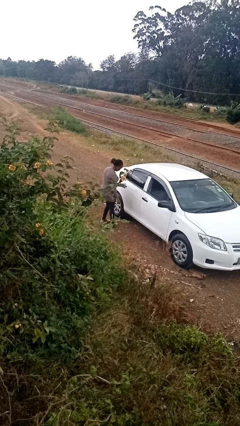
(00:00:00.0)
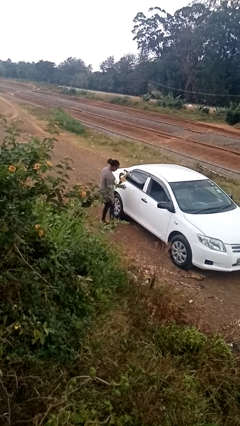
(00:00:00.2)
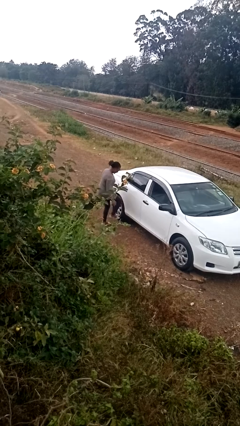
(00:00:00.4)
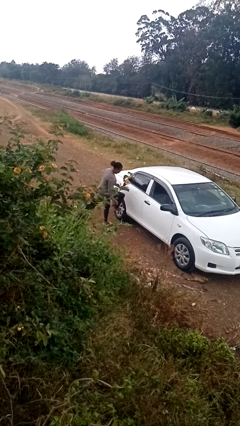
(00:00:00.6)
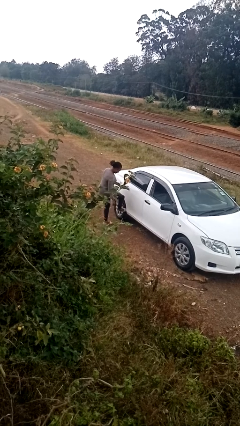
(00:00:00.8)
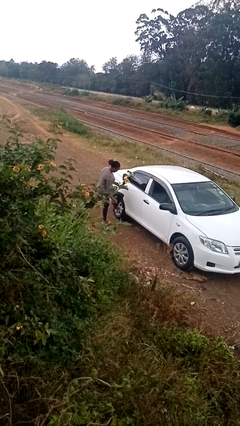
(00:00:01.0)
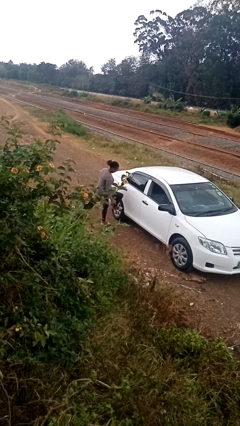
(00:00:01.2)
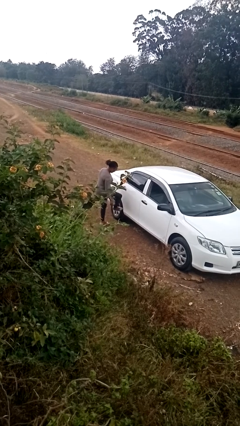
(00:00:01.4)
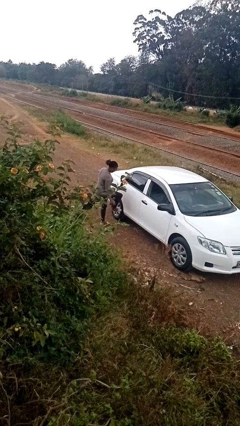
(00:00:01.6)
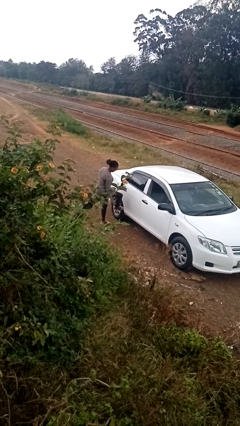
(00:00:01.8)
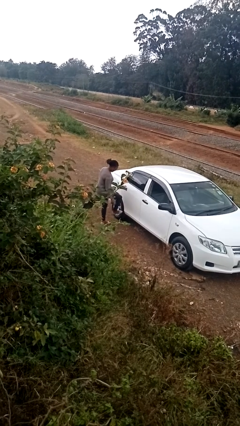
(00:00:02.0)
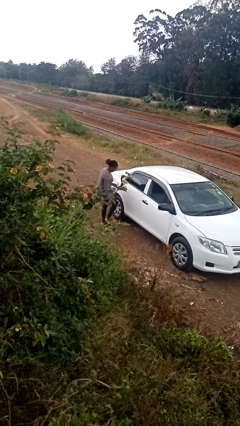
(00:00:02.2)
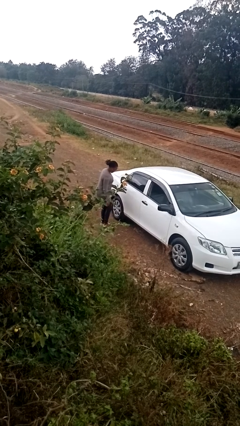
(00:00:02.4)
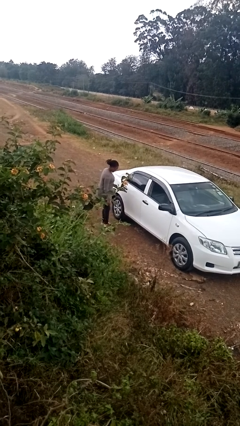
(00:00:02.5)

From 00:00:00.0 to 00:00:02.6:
person kicks car tires

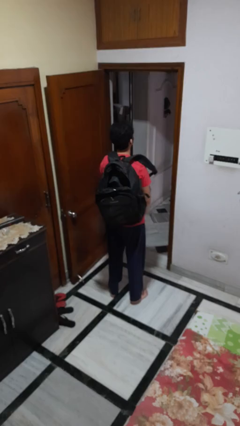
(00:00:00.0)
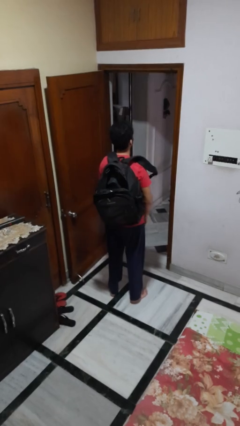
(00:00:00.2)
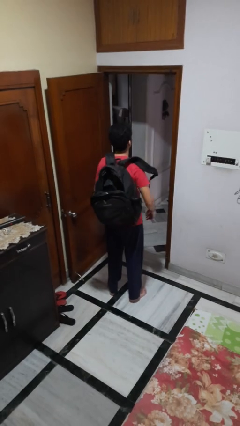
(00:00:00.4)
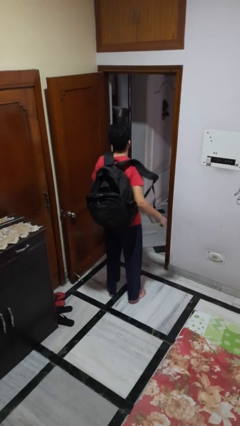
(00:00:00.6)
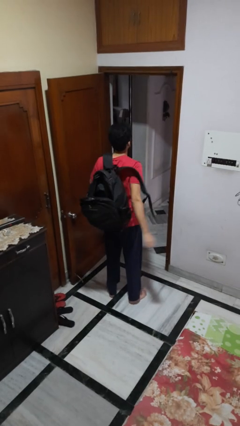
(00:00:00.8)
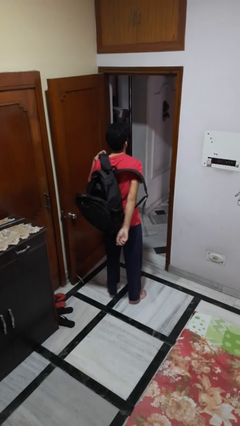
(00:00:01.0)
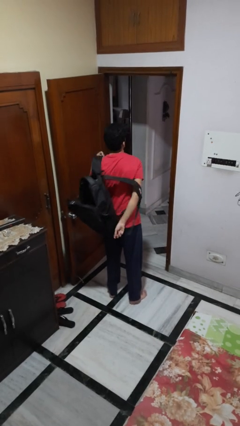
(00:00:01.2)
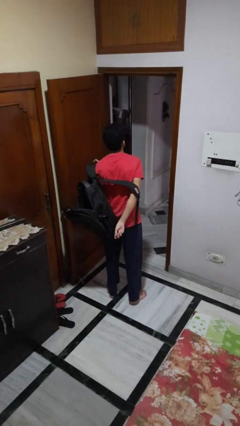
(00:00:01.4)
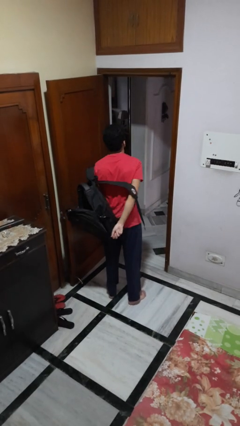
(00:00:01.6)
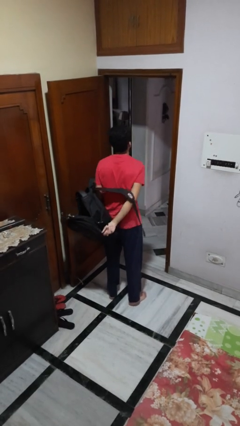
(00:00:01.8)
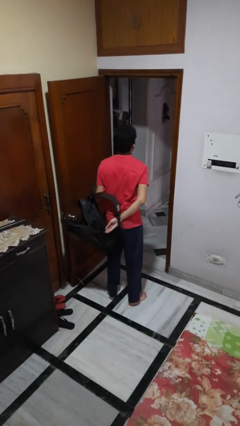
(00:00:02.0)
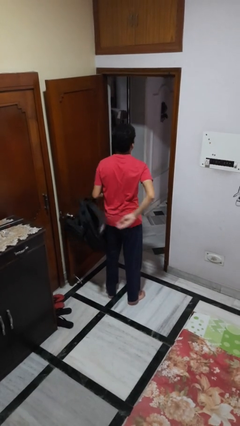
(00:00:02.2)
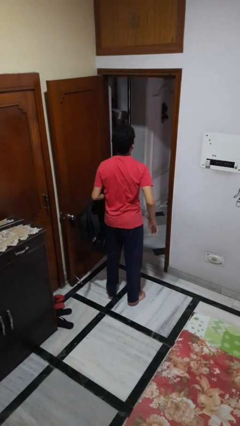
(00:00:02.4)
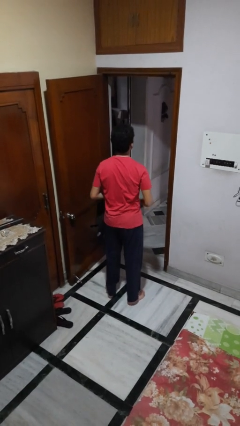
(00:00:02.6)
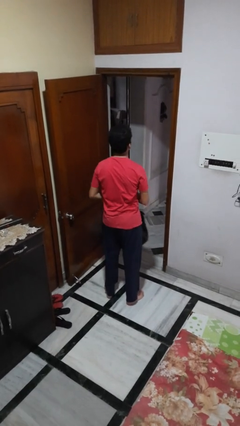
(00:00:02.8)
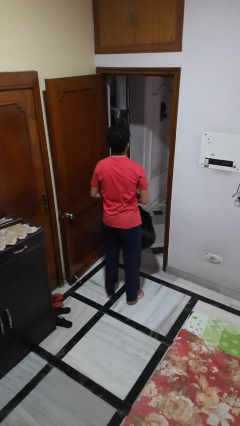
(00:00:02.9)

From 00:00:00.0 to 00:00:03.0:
person takes off backpack

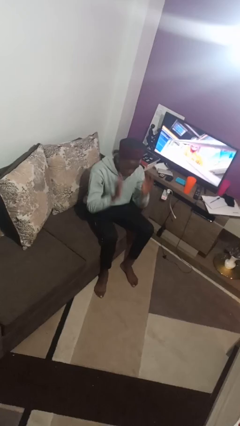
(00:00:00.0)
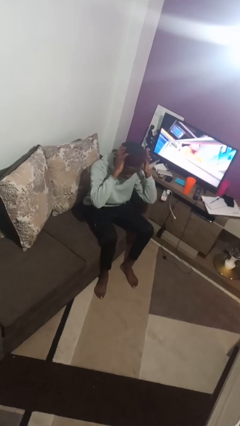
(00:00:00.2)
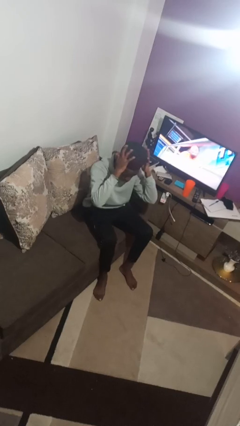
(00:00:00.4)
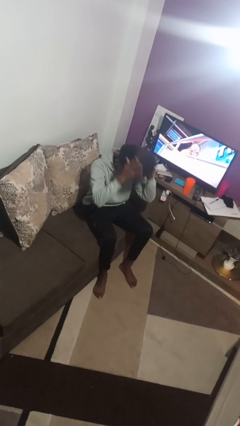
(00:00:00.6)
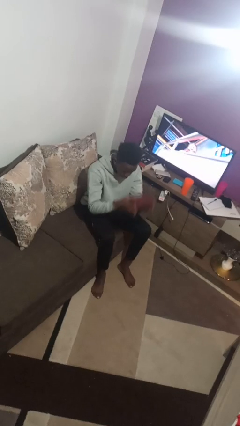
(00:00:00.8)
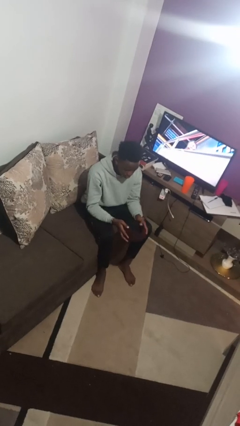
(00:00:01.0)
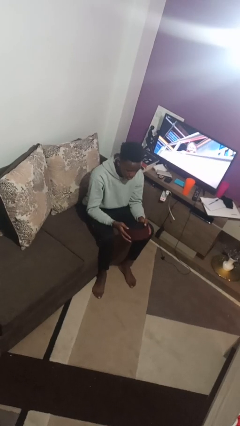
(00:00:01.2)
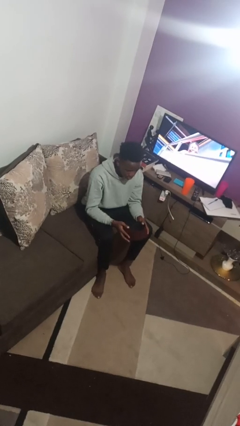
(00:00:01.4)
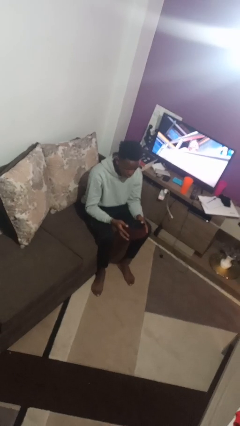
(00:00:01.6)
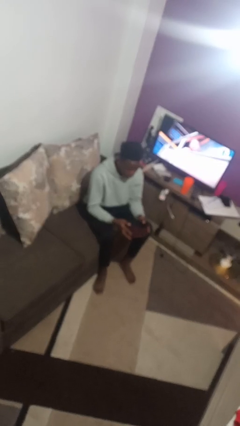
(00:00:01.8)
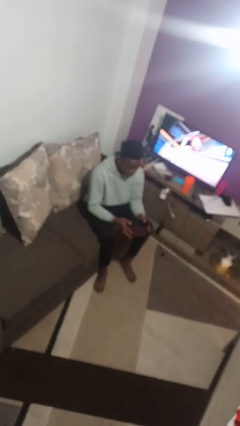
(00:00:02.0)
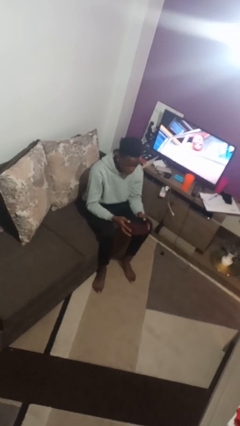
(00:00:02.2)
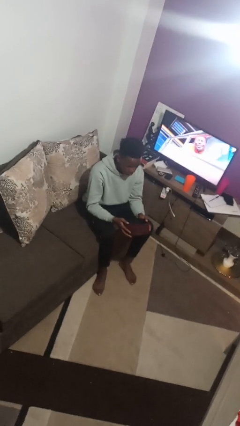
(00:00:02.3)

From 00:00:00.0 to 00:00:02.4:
person takes off hat

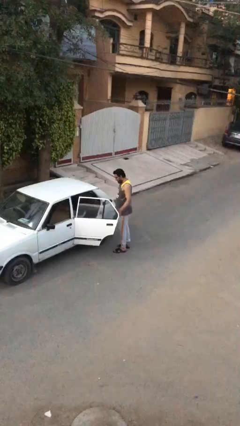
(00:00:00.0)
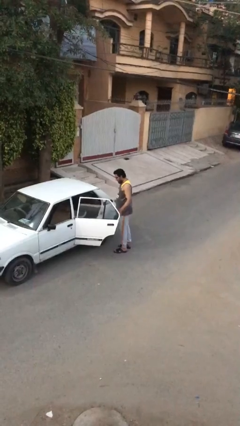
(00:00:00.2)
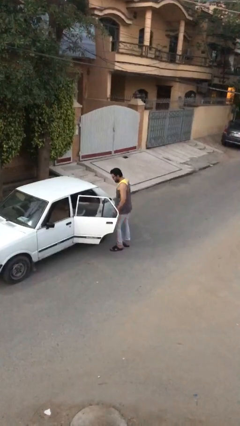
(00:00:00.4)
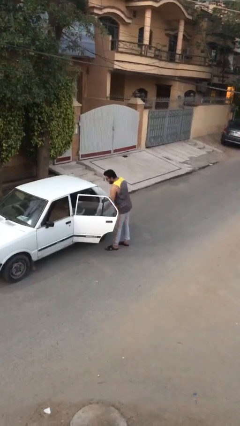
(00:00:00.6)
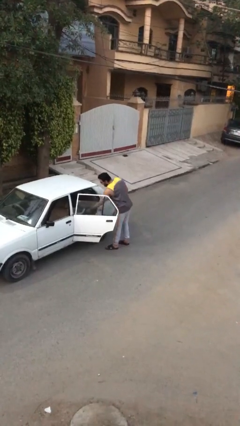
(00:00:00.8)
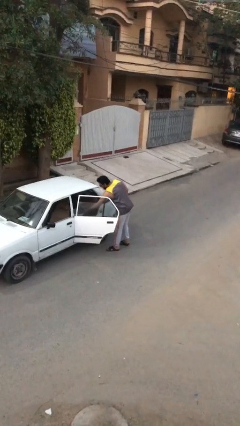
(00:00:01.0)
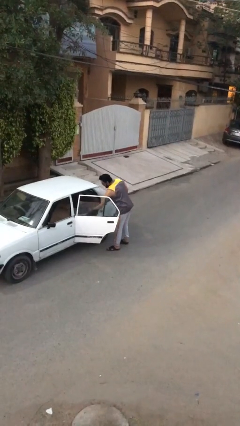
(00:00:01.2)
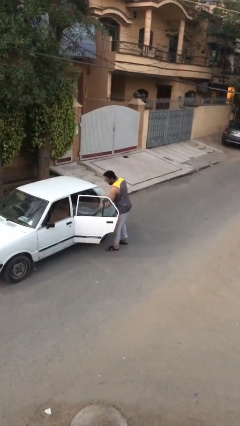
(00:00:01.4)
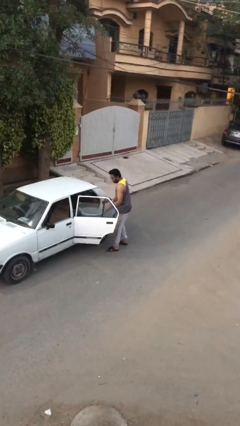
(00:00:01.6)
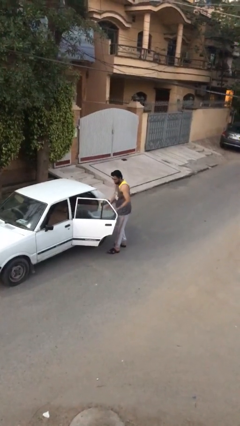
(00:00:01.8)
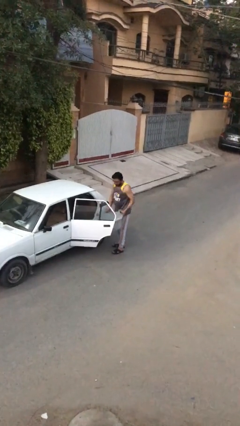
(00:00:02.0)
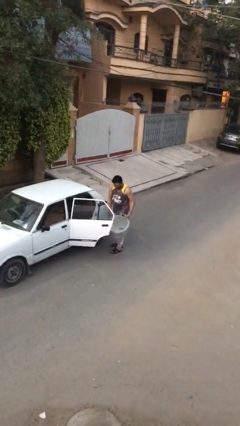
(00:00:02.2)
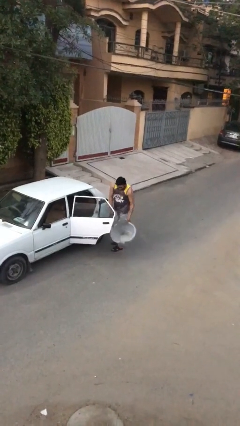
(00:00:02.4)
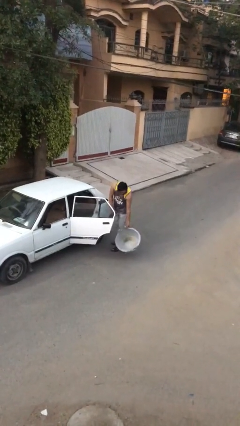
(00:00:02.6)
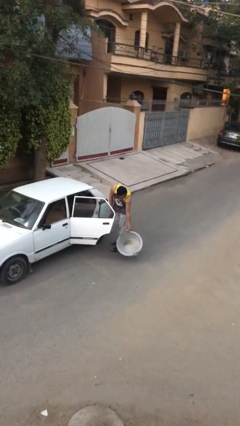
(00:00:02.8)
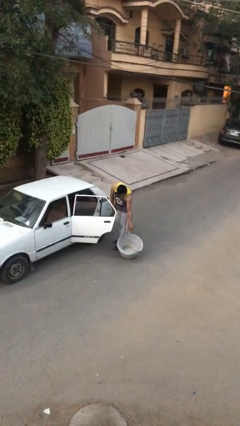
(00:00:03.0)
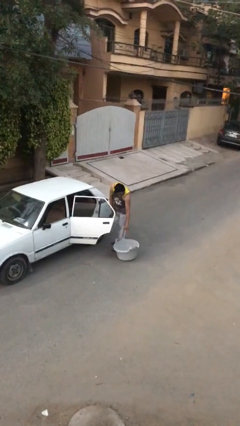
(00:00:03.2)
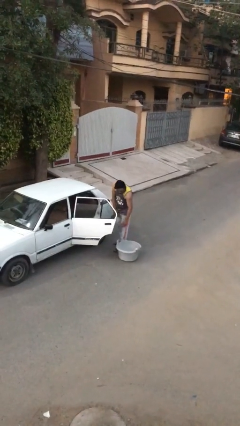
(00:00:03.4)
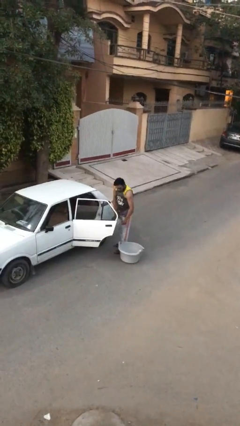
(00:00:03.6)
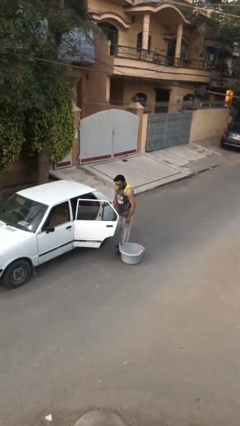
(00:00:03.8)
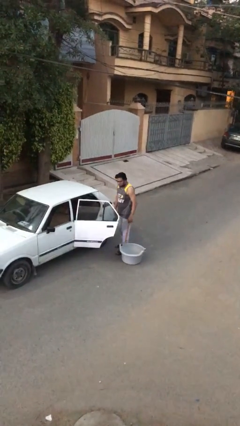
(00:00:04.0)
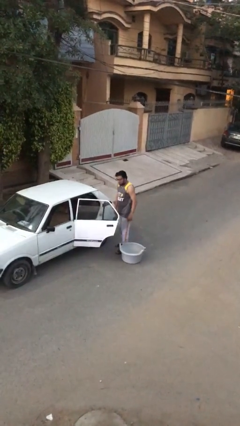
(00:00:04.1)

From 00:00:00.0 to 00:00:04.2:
person unloads car

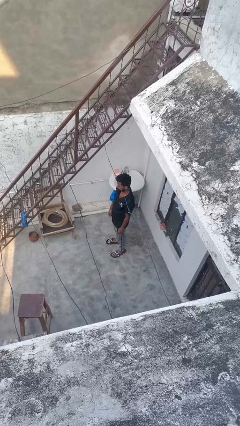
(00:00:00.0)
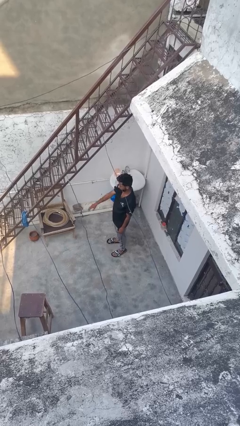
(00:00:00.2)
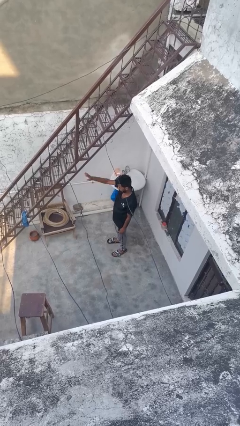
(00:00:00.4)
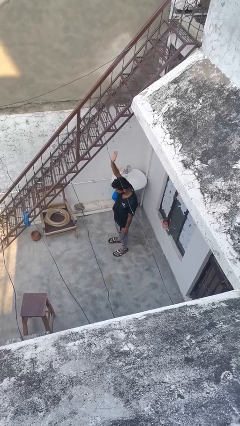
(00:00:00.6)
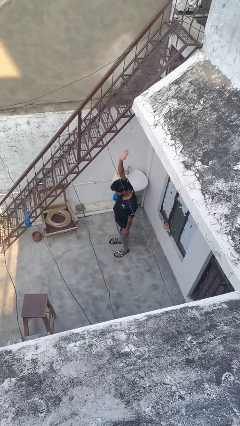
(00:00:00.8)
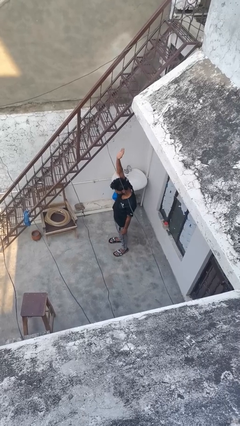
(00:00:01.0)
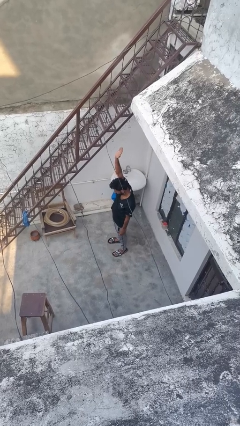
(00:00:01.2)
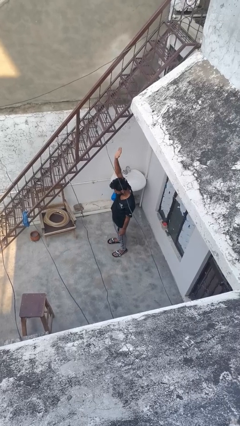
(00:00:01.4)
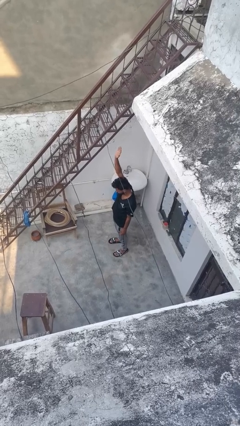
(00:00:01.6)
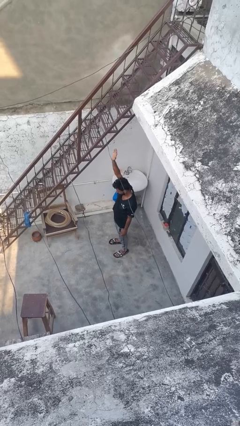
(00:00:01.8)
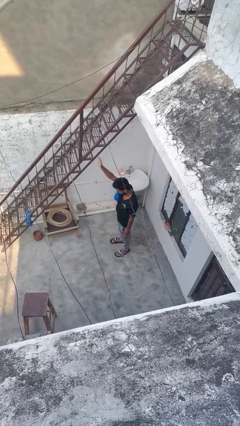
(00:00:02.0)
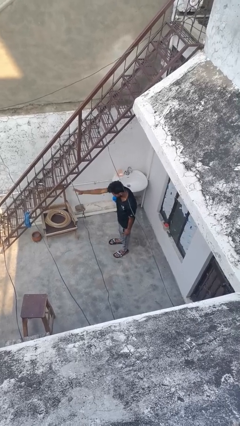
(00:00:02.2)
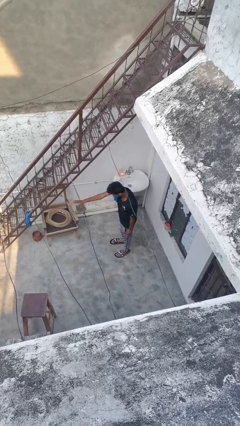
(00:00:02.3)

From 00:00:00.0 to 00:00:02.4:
person gestures swipe up

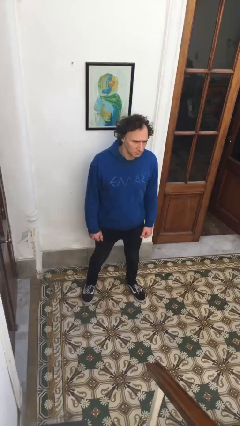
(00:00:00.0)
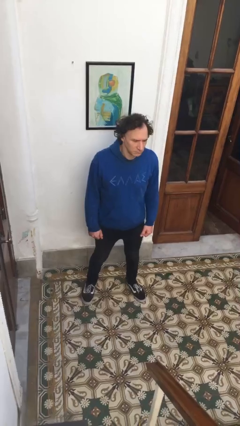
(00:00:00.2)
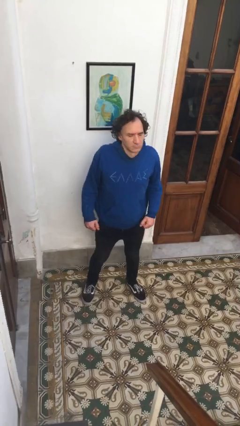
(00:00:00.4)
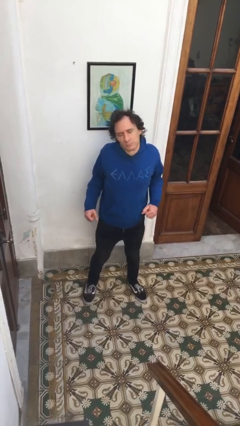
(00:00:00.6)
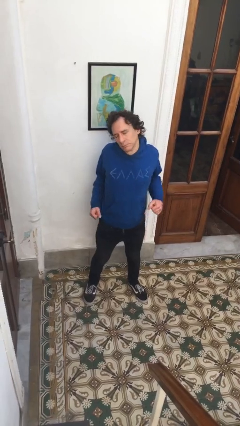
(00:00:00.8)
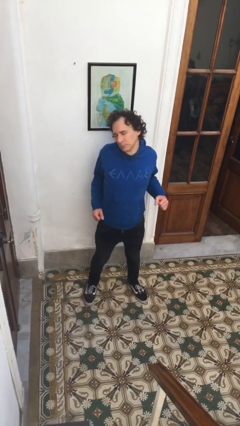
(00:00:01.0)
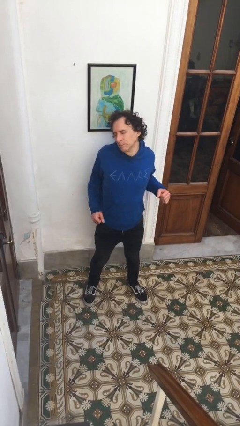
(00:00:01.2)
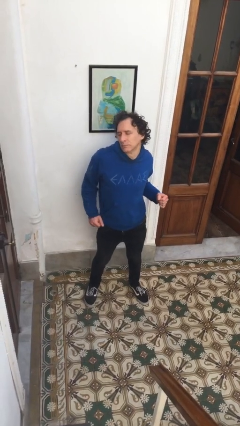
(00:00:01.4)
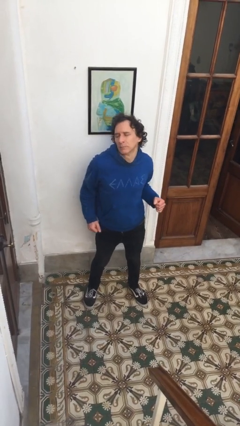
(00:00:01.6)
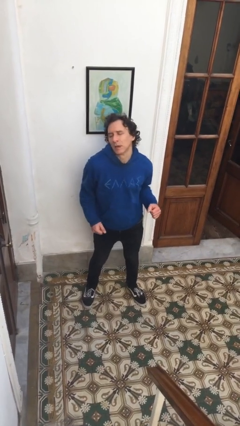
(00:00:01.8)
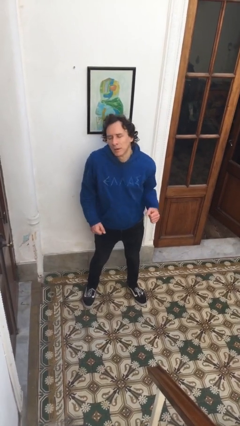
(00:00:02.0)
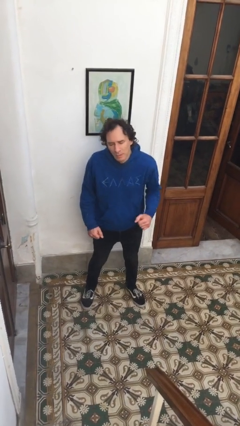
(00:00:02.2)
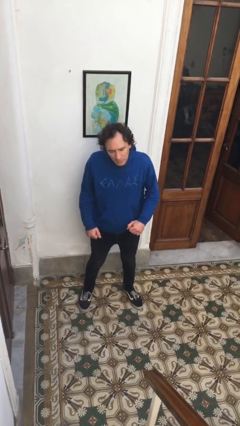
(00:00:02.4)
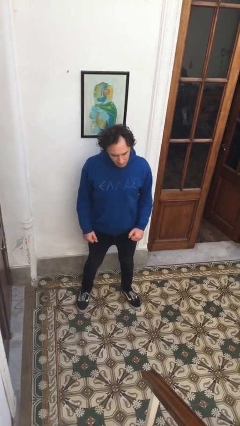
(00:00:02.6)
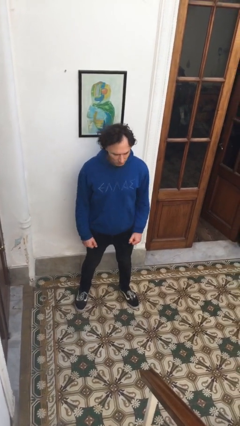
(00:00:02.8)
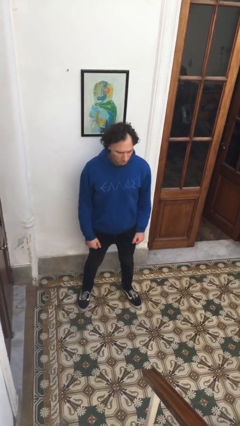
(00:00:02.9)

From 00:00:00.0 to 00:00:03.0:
person stretches back
